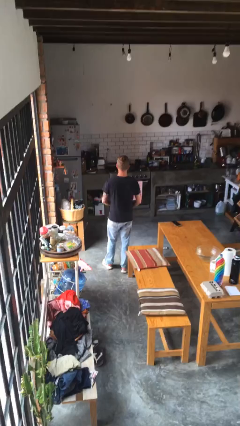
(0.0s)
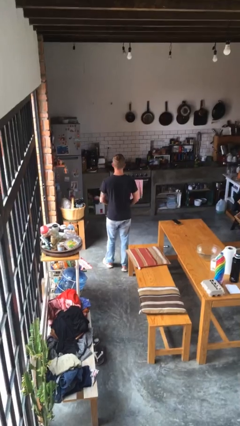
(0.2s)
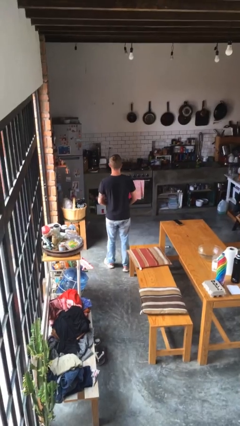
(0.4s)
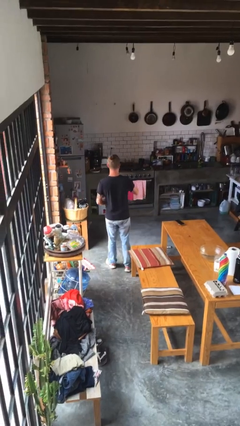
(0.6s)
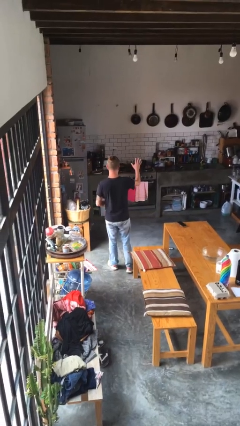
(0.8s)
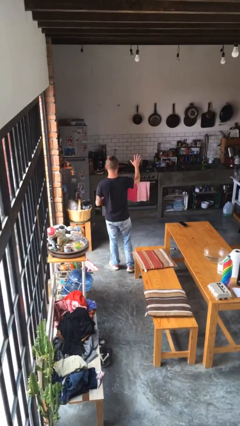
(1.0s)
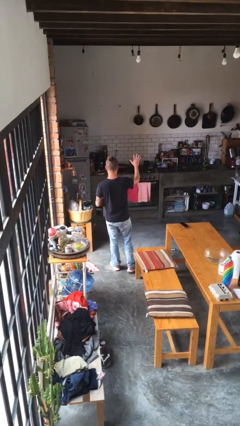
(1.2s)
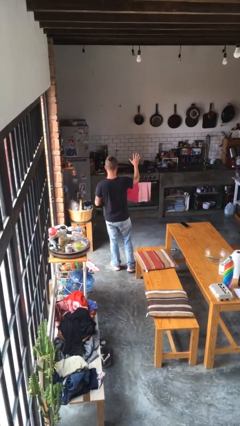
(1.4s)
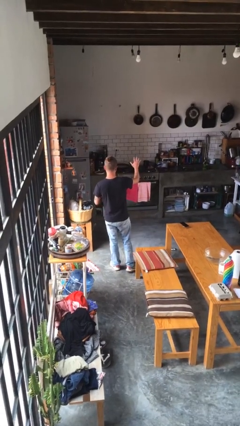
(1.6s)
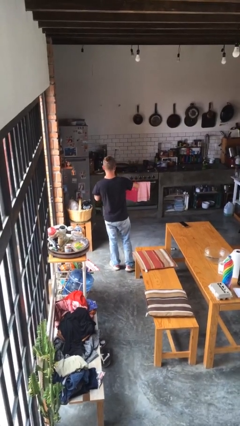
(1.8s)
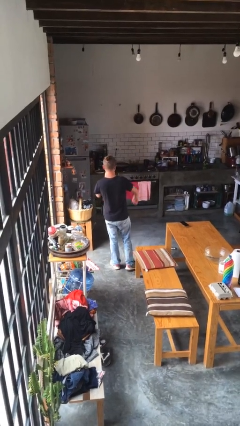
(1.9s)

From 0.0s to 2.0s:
person gestures number five

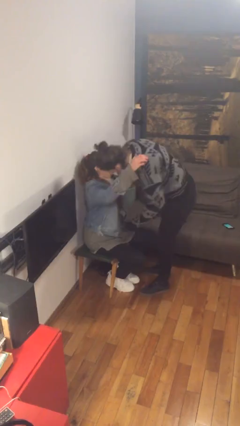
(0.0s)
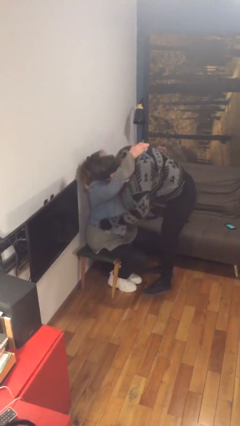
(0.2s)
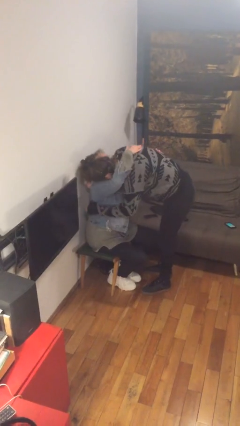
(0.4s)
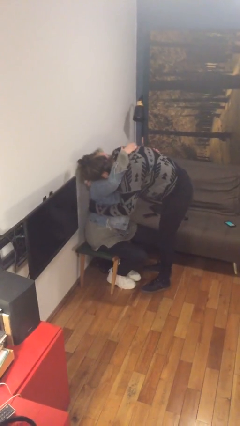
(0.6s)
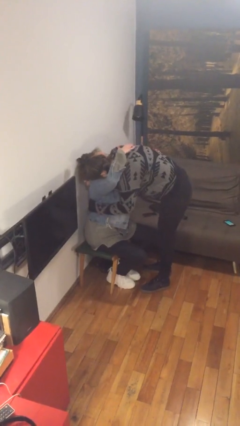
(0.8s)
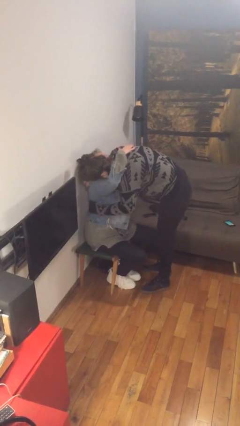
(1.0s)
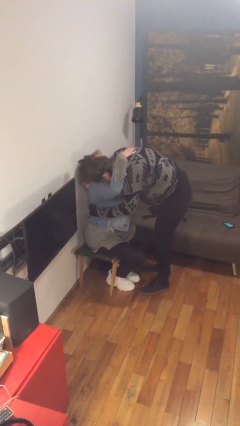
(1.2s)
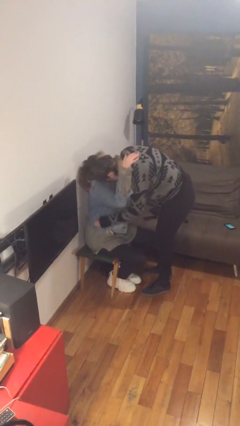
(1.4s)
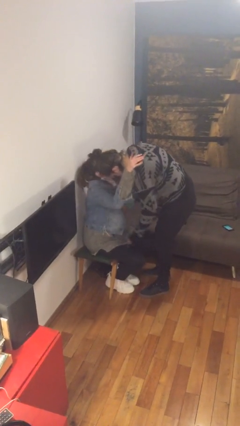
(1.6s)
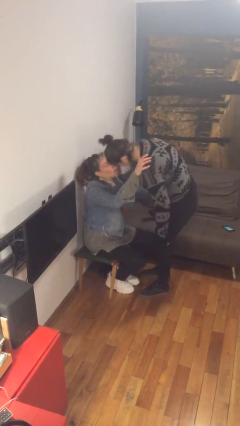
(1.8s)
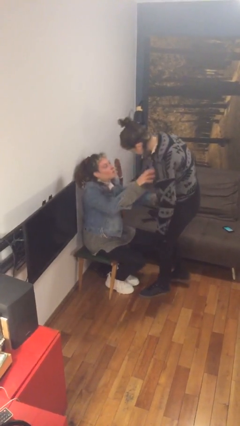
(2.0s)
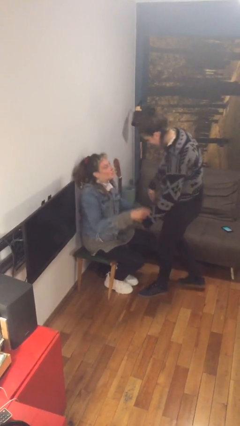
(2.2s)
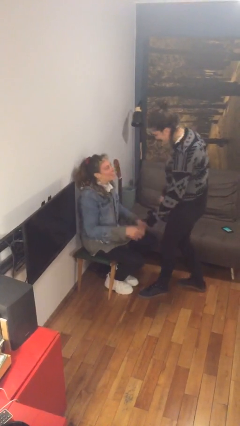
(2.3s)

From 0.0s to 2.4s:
person embraces person

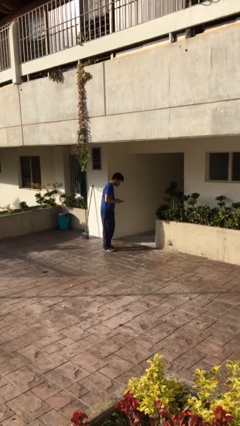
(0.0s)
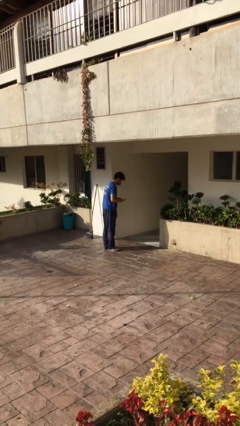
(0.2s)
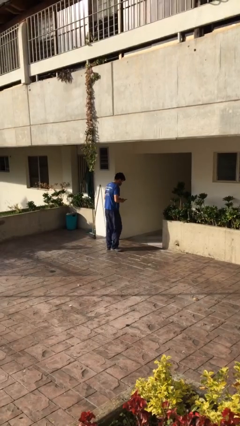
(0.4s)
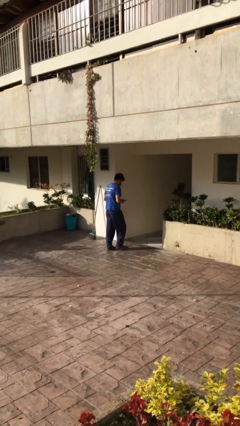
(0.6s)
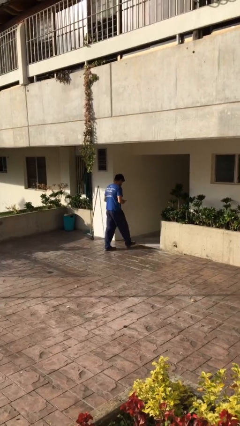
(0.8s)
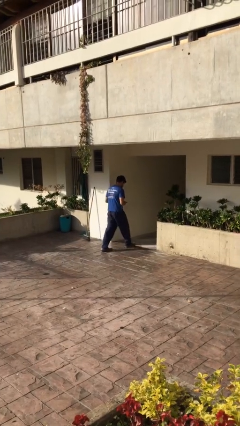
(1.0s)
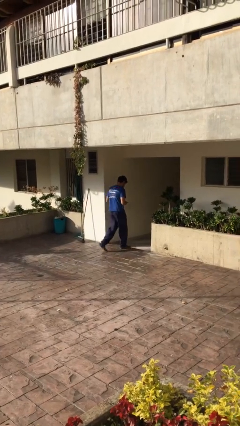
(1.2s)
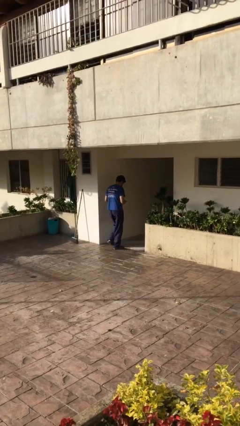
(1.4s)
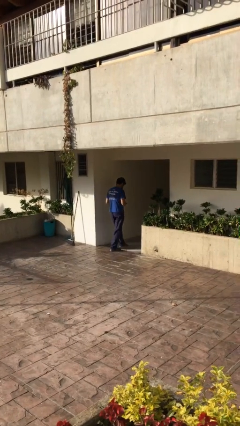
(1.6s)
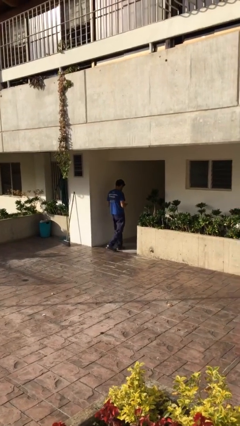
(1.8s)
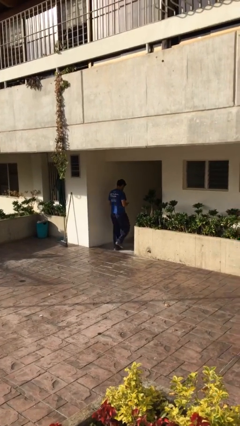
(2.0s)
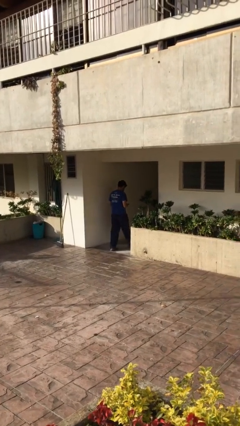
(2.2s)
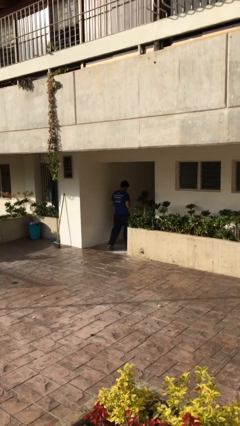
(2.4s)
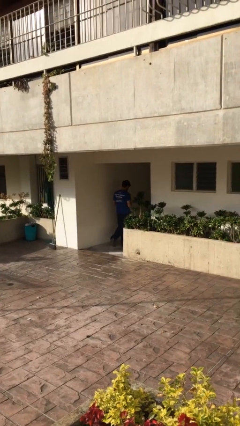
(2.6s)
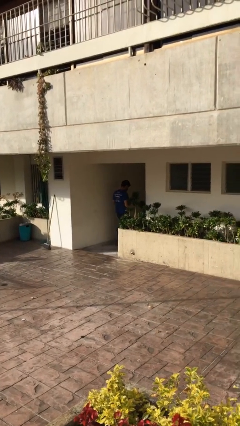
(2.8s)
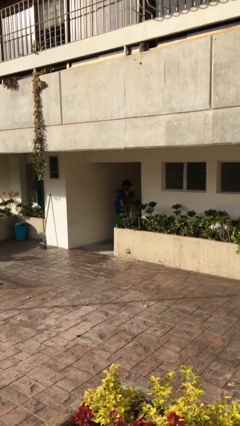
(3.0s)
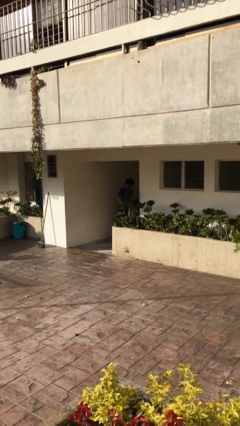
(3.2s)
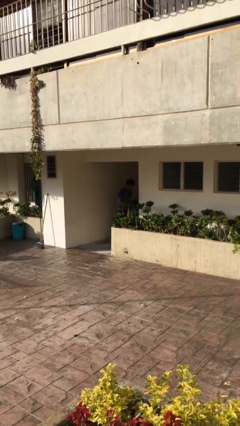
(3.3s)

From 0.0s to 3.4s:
person exits scene through structure

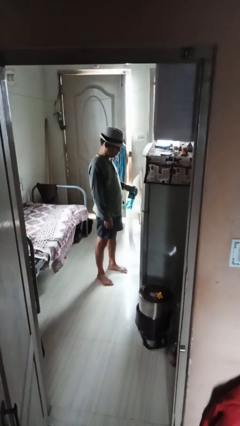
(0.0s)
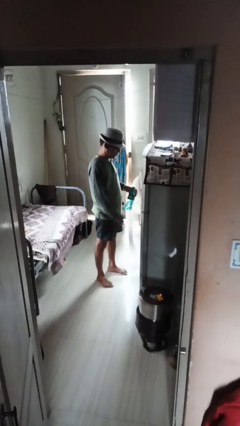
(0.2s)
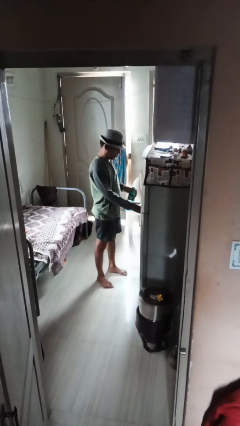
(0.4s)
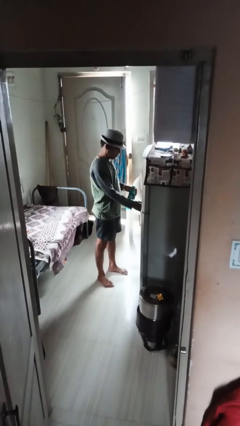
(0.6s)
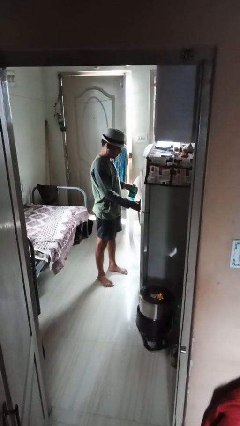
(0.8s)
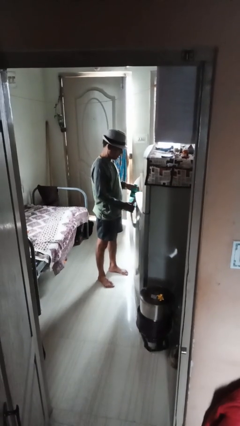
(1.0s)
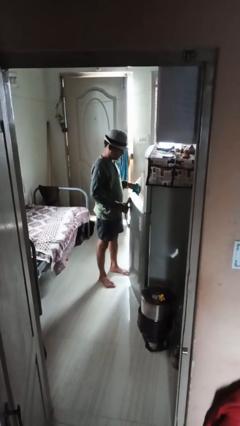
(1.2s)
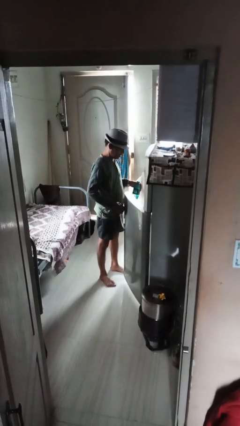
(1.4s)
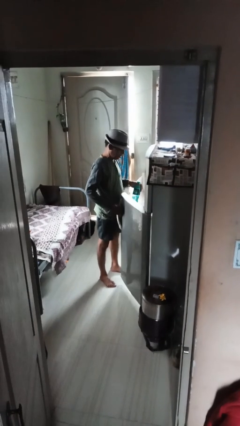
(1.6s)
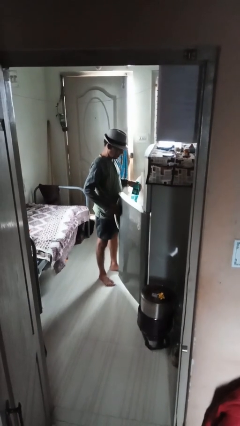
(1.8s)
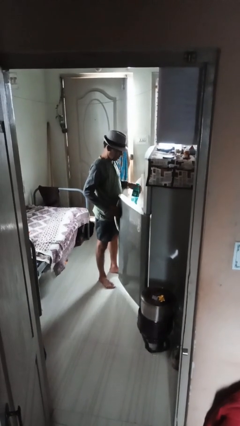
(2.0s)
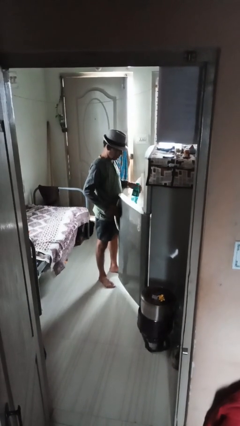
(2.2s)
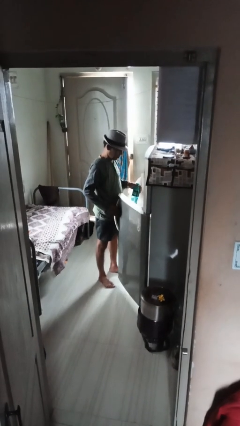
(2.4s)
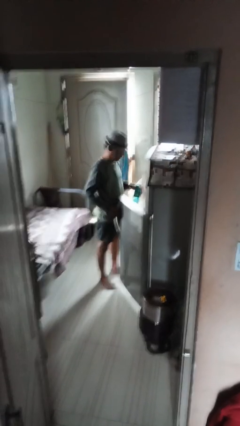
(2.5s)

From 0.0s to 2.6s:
person opens refrigerator

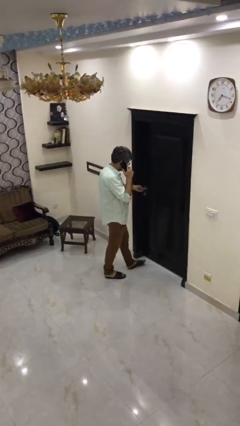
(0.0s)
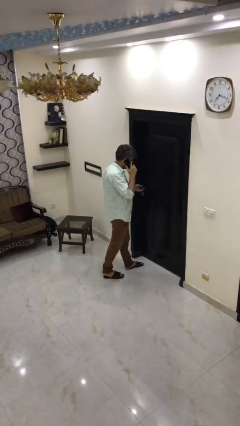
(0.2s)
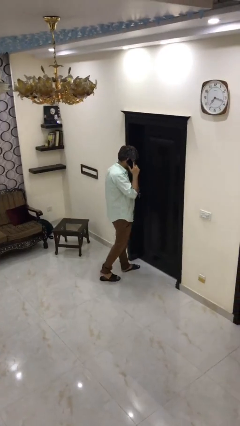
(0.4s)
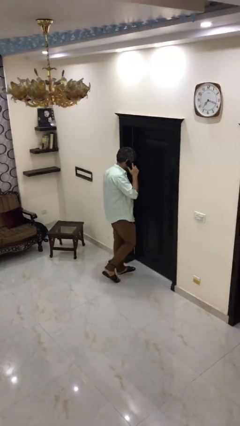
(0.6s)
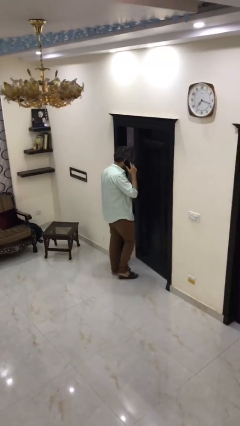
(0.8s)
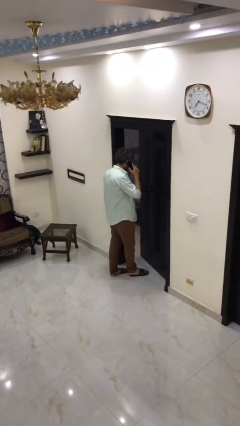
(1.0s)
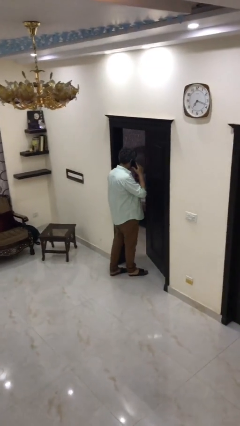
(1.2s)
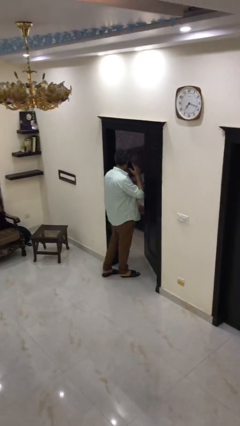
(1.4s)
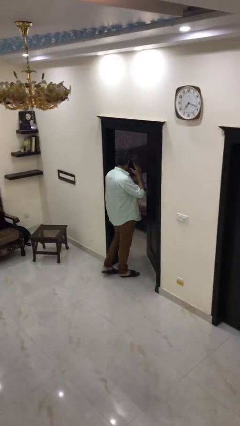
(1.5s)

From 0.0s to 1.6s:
person opens facility door

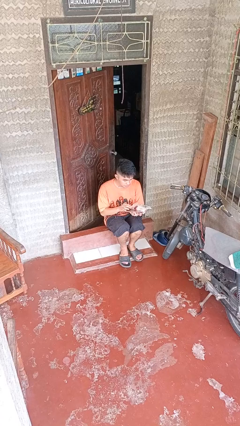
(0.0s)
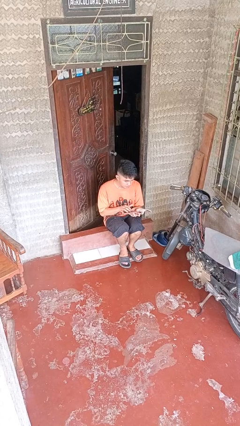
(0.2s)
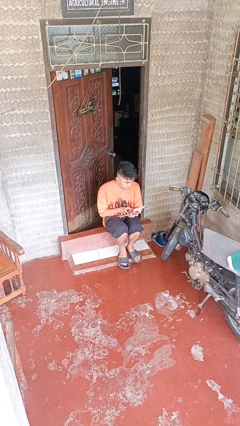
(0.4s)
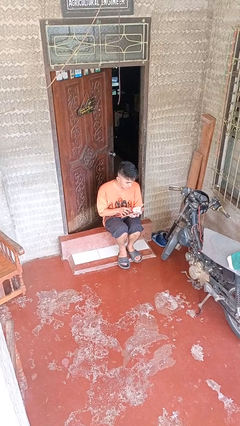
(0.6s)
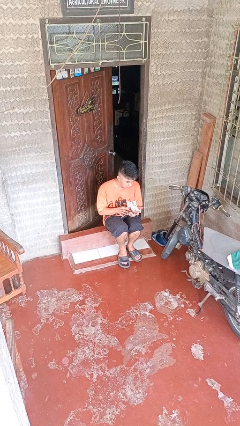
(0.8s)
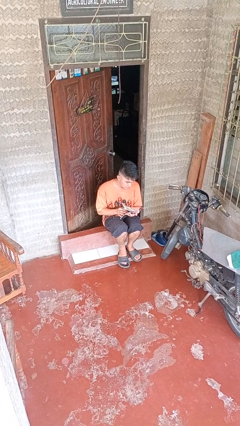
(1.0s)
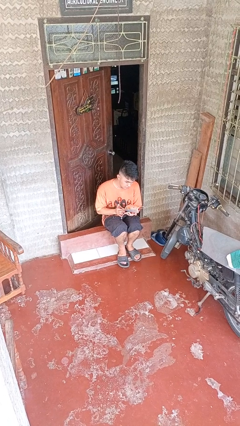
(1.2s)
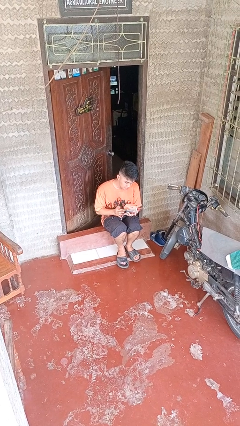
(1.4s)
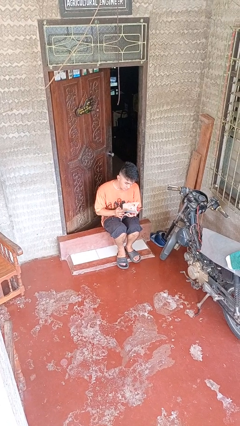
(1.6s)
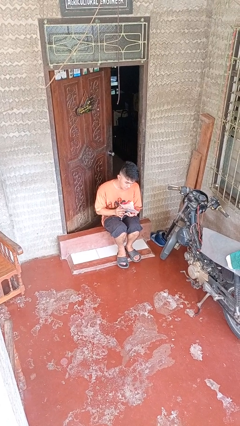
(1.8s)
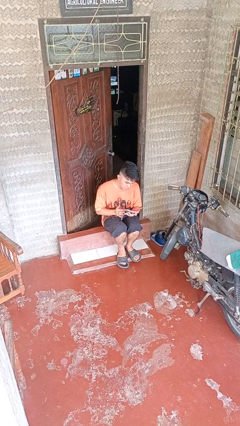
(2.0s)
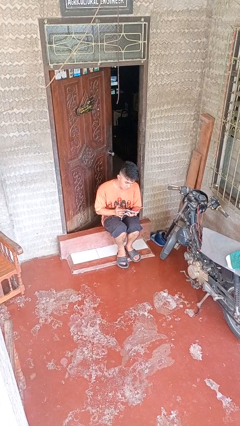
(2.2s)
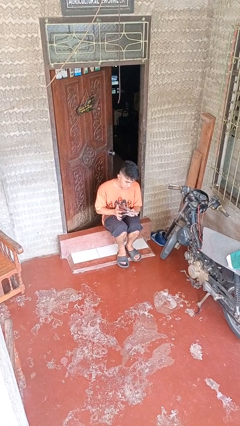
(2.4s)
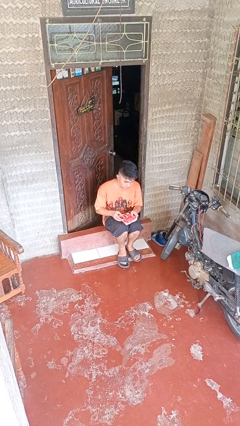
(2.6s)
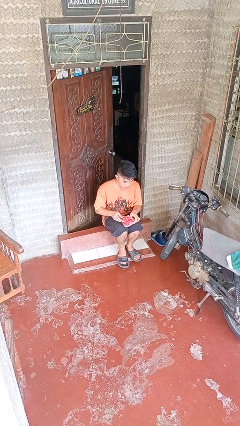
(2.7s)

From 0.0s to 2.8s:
person reads magazine

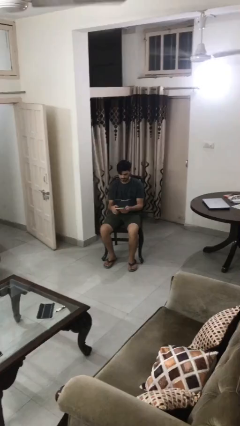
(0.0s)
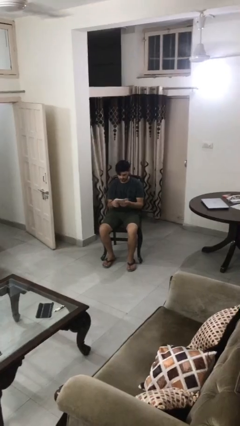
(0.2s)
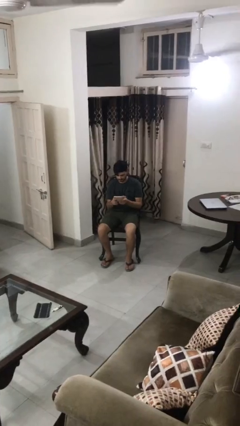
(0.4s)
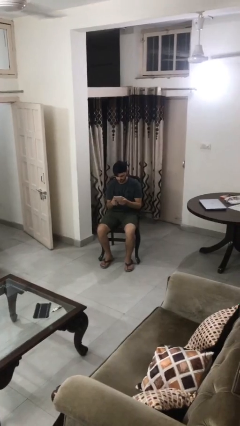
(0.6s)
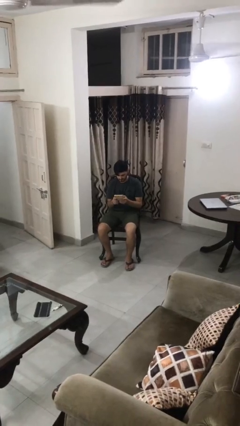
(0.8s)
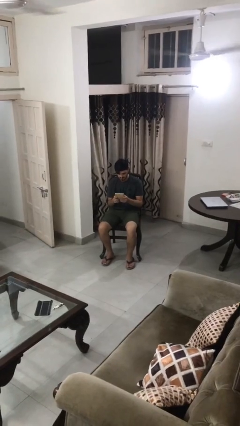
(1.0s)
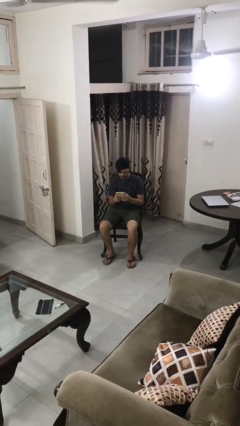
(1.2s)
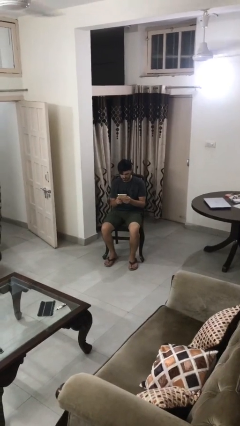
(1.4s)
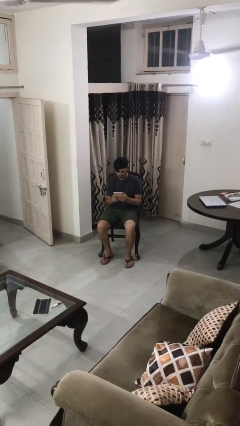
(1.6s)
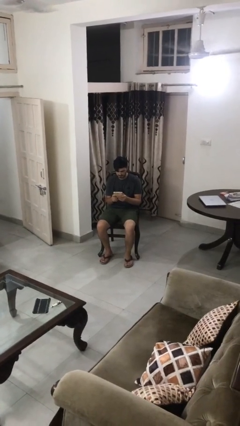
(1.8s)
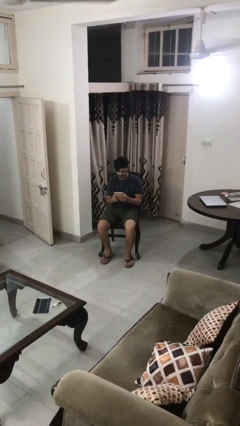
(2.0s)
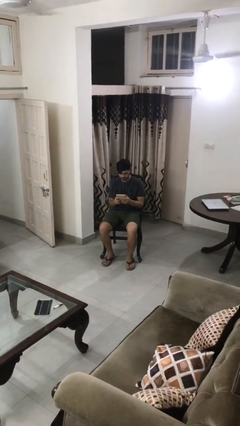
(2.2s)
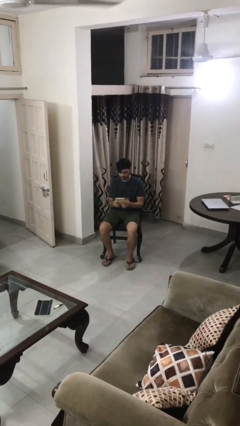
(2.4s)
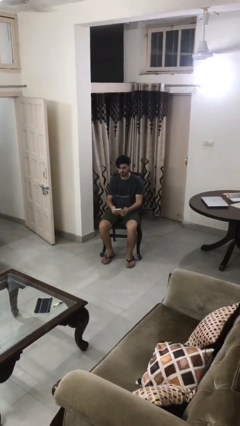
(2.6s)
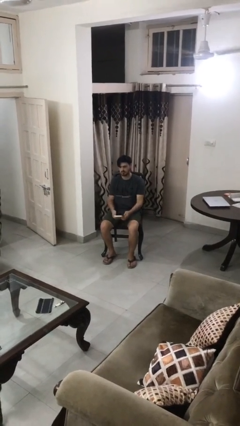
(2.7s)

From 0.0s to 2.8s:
person interacts with tablet
